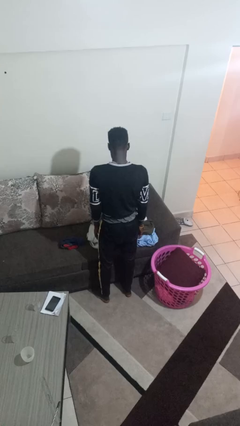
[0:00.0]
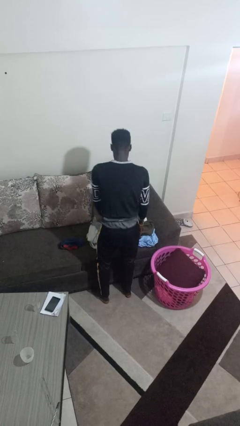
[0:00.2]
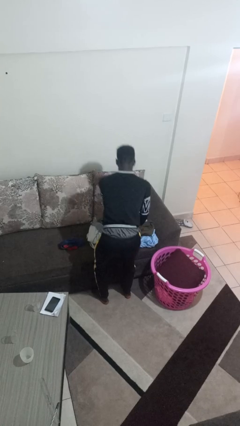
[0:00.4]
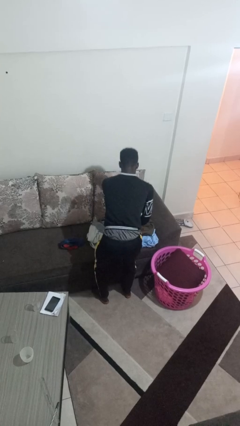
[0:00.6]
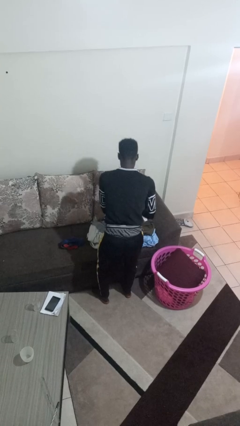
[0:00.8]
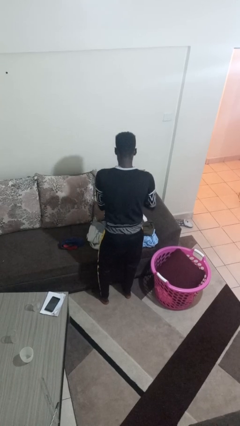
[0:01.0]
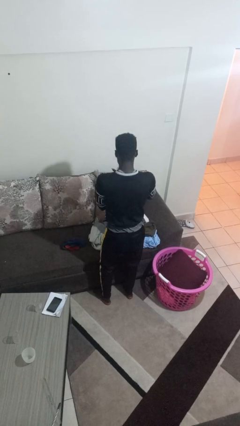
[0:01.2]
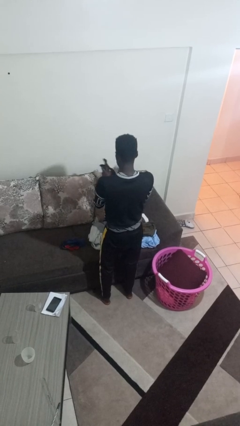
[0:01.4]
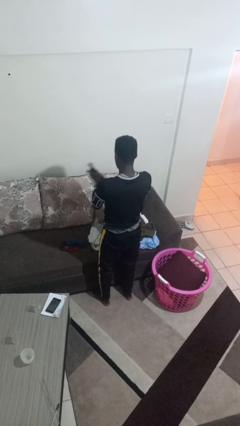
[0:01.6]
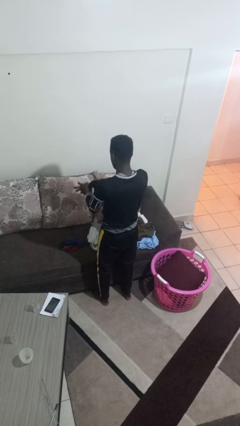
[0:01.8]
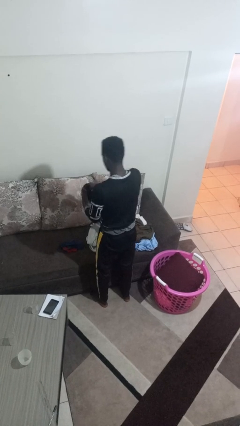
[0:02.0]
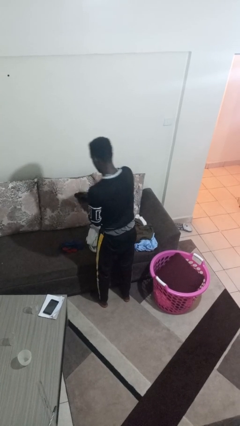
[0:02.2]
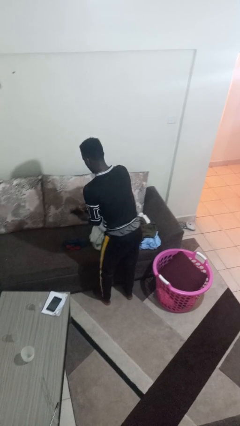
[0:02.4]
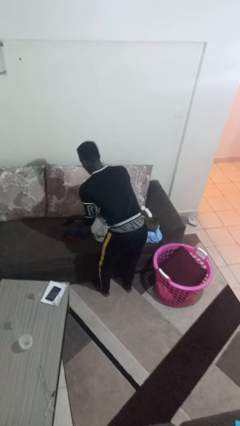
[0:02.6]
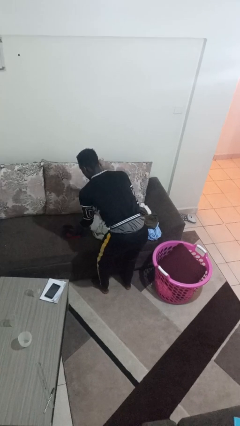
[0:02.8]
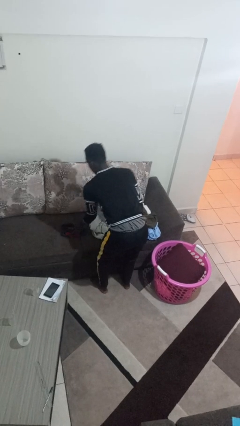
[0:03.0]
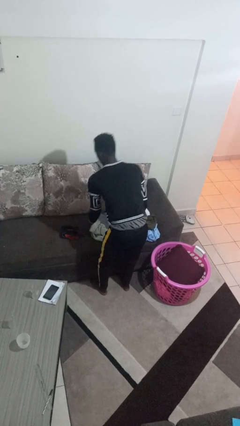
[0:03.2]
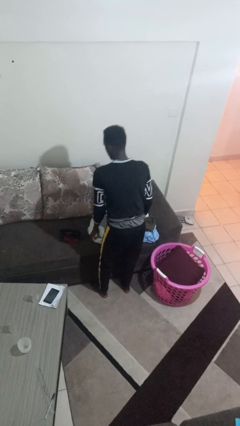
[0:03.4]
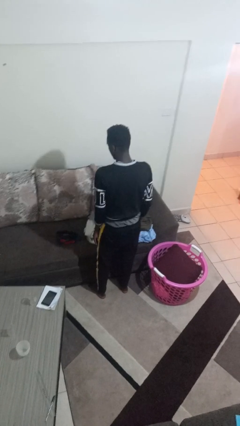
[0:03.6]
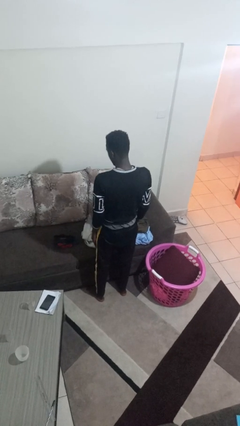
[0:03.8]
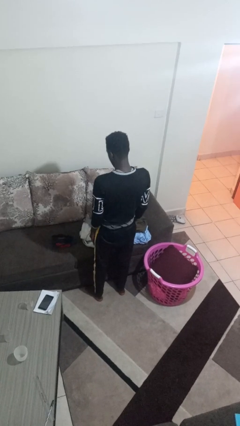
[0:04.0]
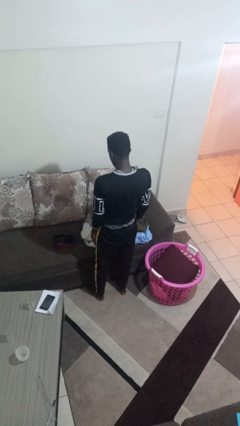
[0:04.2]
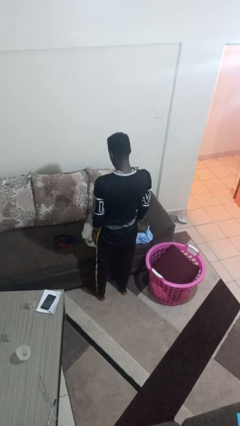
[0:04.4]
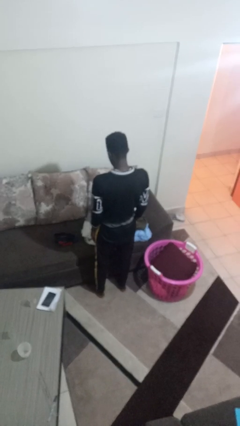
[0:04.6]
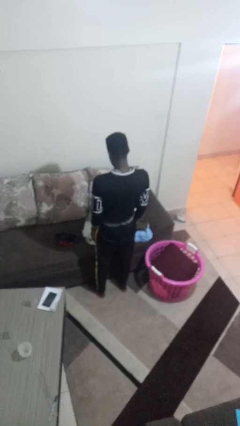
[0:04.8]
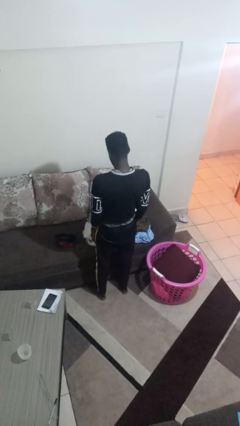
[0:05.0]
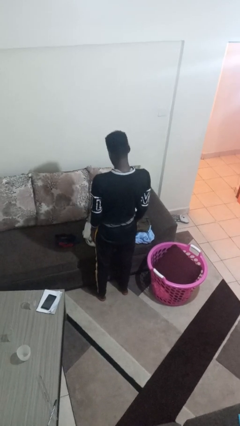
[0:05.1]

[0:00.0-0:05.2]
person folds socks

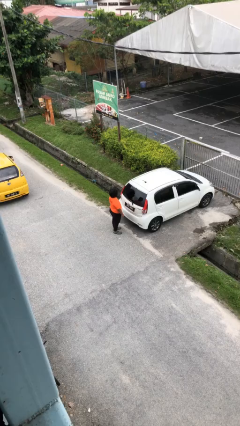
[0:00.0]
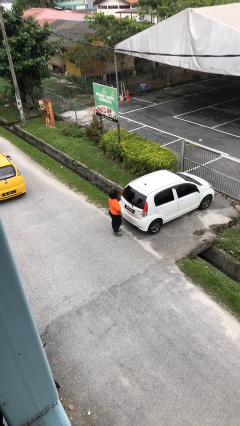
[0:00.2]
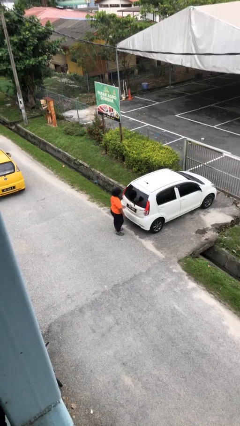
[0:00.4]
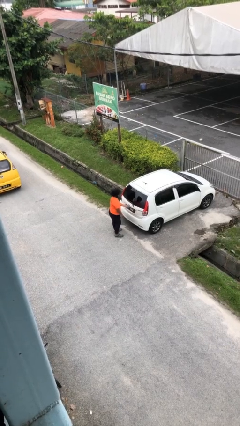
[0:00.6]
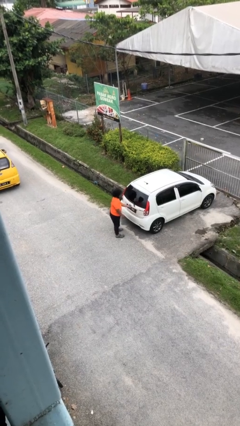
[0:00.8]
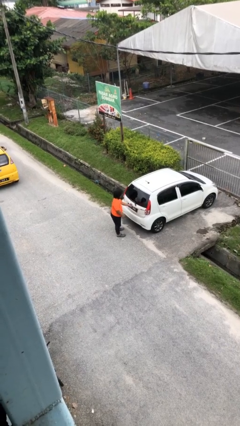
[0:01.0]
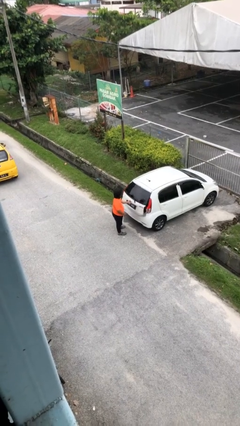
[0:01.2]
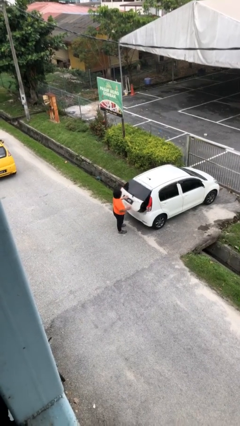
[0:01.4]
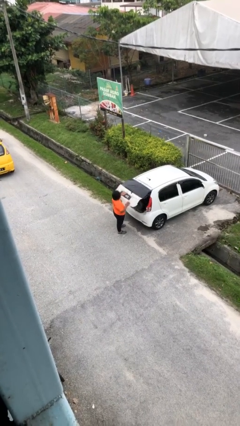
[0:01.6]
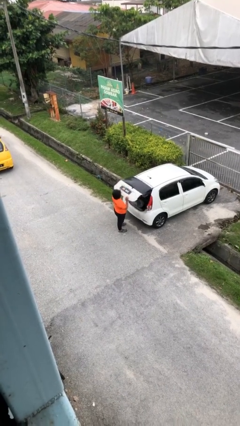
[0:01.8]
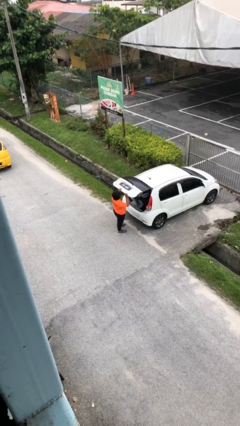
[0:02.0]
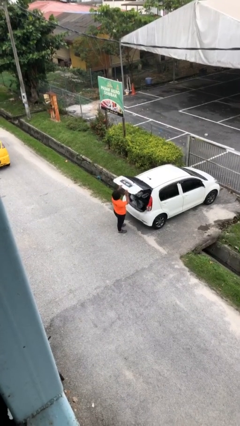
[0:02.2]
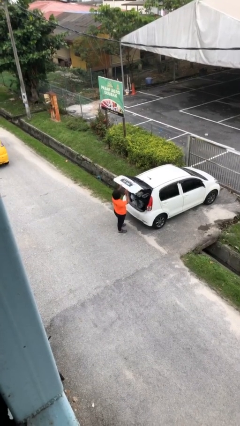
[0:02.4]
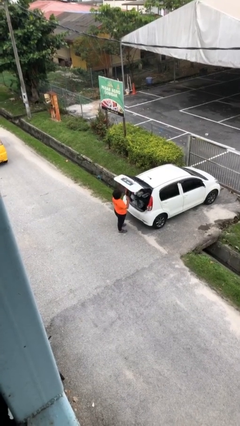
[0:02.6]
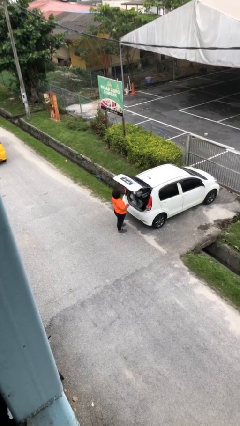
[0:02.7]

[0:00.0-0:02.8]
person opens car trunk

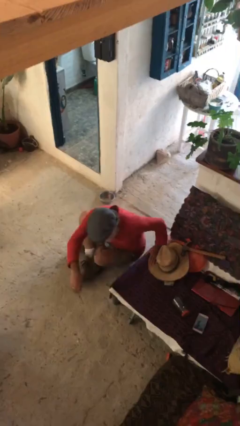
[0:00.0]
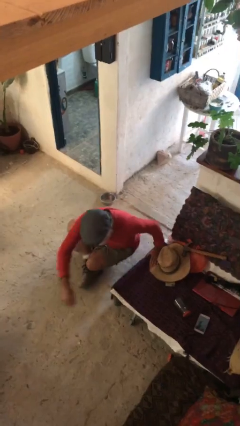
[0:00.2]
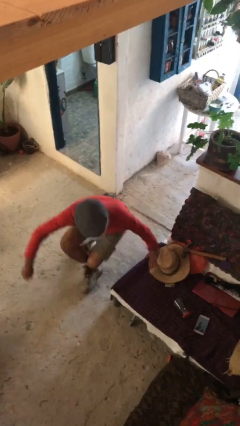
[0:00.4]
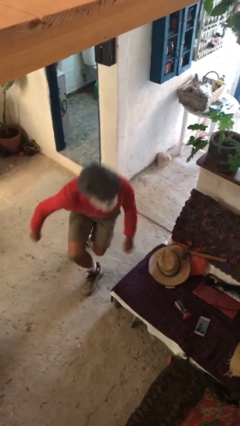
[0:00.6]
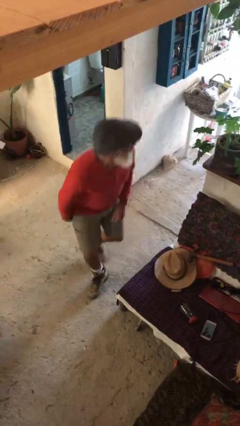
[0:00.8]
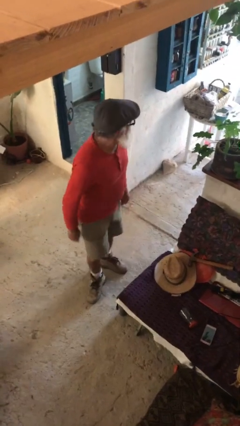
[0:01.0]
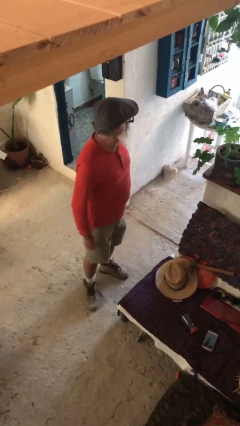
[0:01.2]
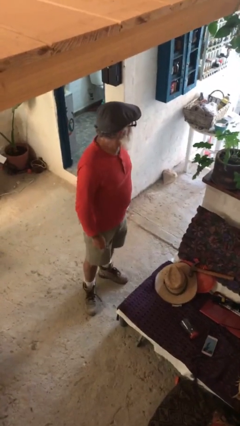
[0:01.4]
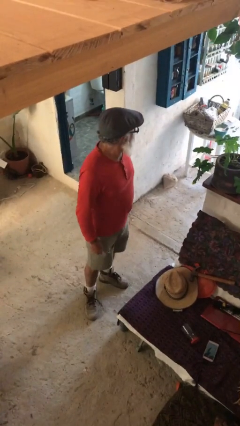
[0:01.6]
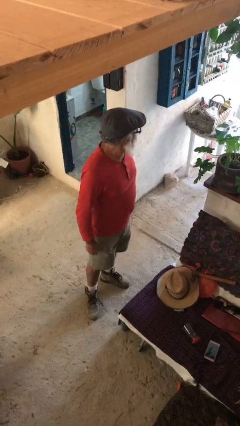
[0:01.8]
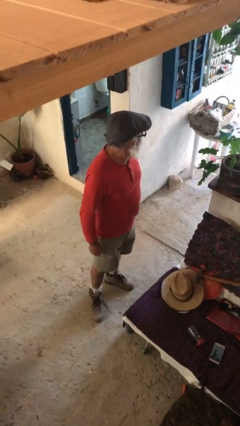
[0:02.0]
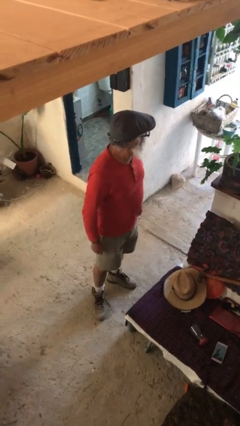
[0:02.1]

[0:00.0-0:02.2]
person stands up

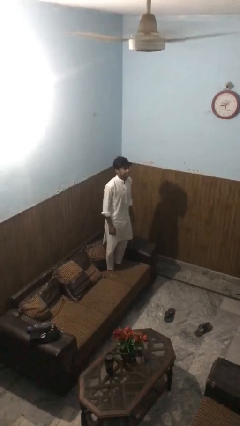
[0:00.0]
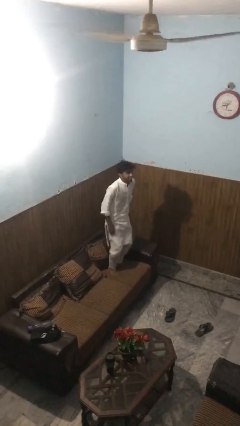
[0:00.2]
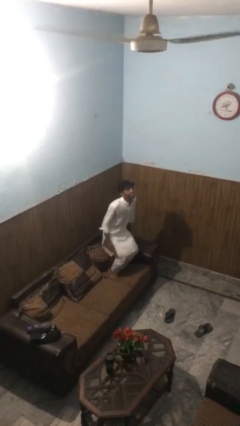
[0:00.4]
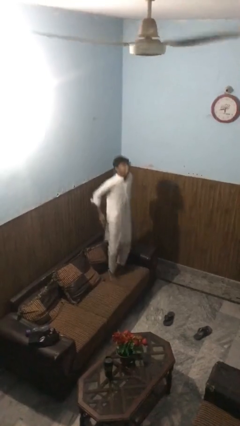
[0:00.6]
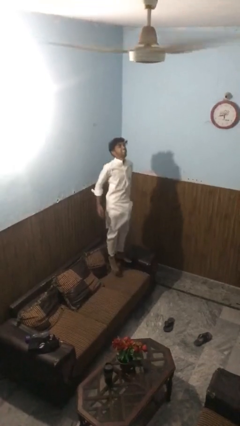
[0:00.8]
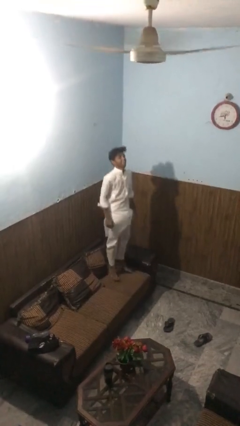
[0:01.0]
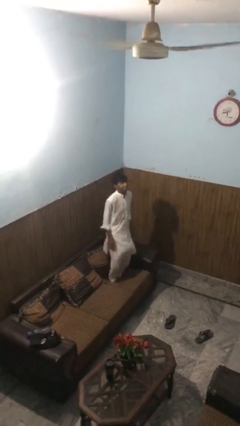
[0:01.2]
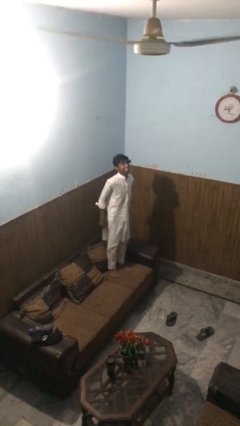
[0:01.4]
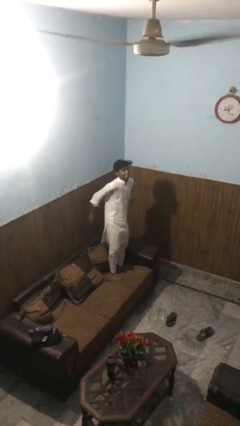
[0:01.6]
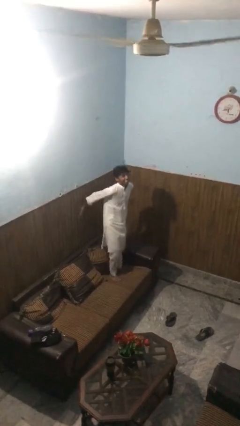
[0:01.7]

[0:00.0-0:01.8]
person jumps on couch

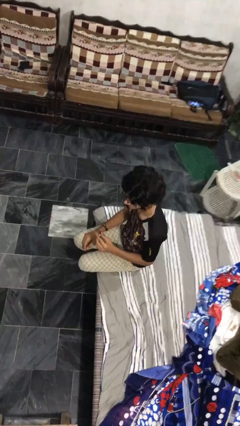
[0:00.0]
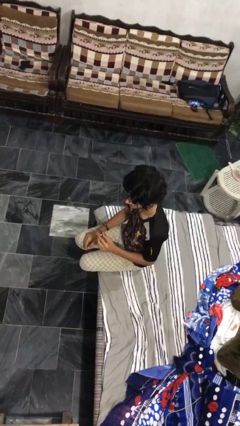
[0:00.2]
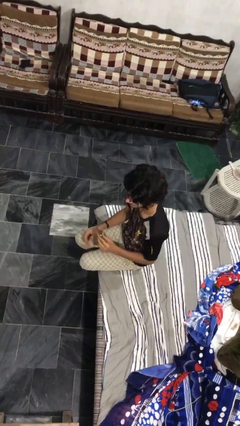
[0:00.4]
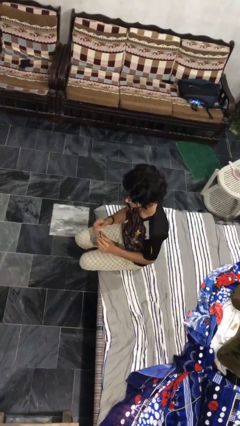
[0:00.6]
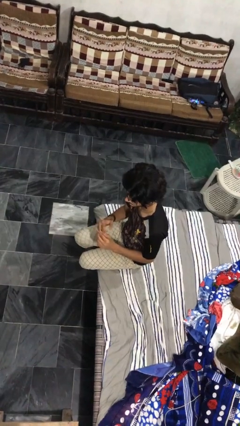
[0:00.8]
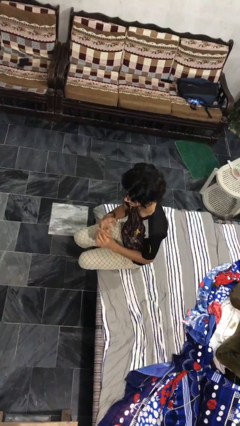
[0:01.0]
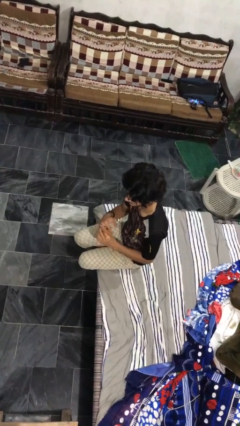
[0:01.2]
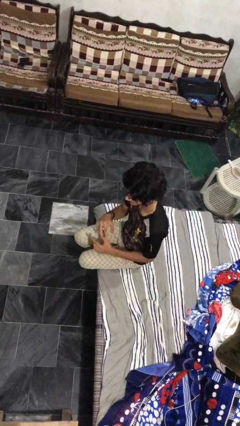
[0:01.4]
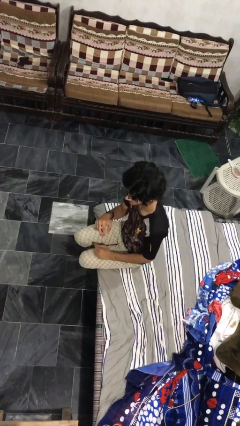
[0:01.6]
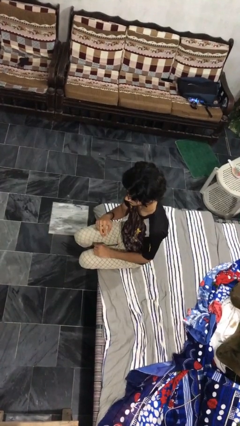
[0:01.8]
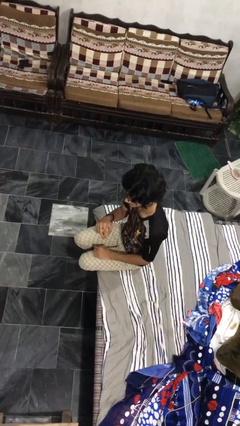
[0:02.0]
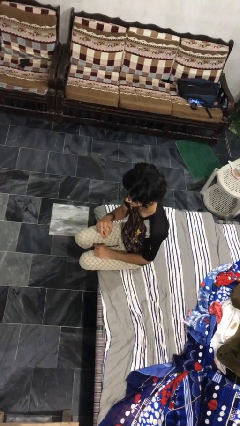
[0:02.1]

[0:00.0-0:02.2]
person puts on ring

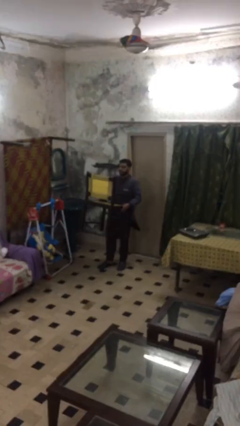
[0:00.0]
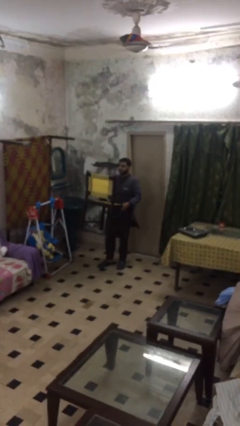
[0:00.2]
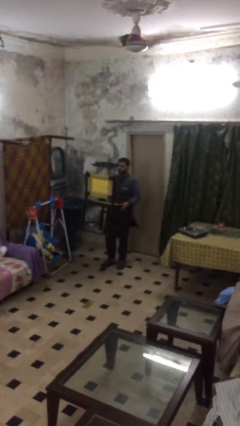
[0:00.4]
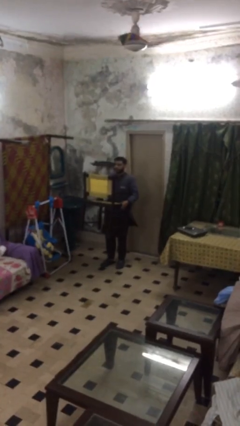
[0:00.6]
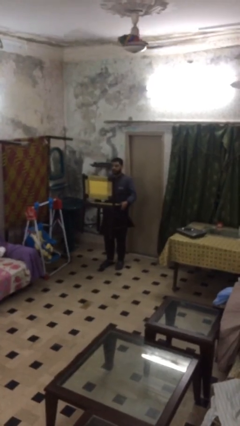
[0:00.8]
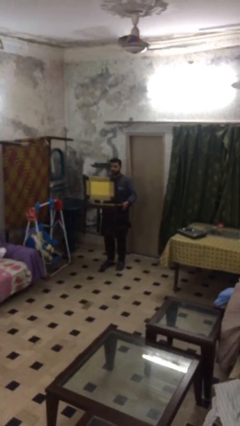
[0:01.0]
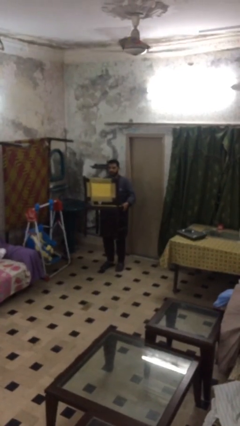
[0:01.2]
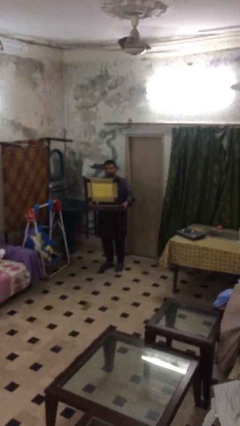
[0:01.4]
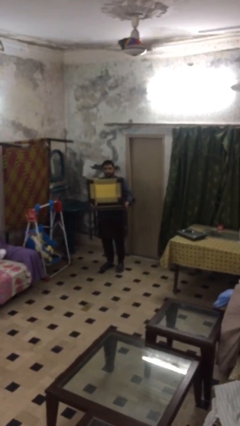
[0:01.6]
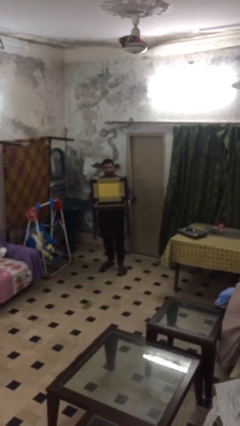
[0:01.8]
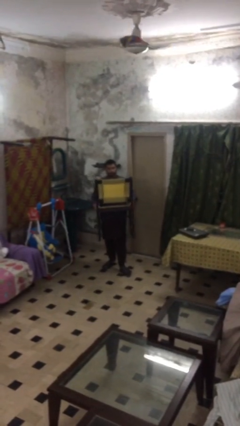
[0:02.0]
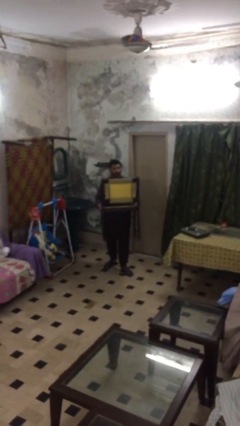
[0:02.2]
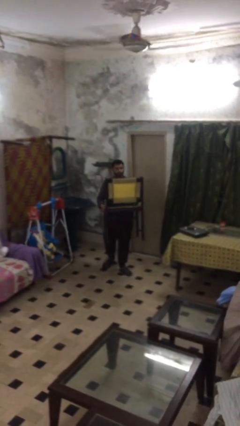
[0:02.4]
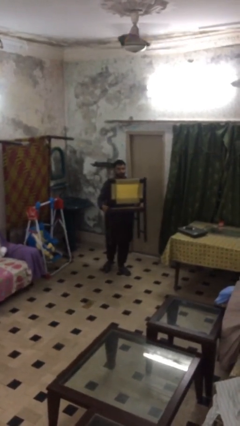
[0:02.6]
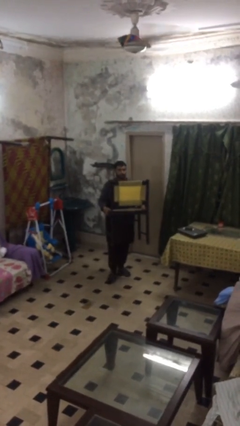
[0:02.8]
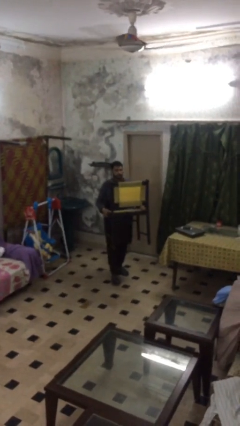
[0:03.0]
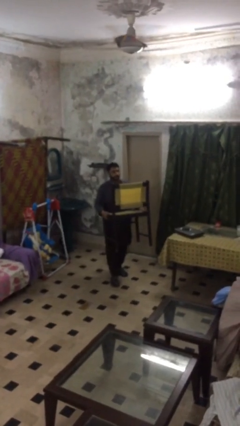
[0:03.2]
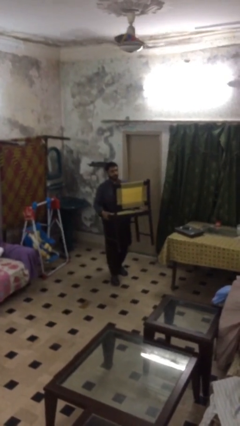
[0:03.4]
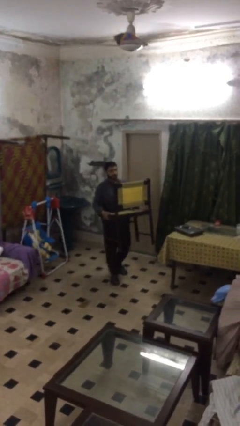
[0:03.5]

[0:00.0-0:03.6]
person carries heavy object
